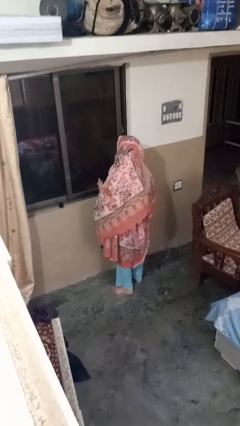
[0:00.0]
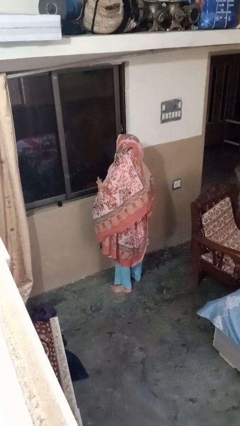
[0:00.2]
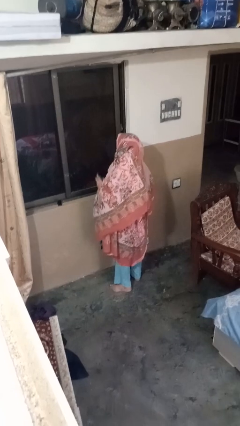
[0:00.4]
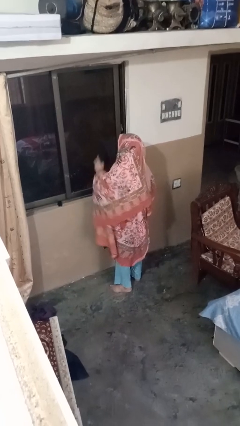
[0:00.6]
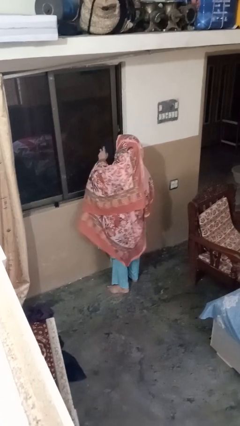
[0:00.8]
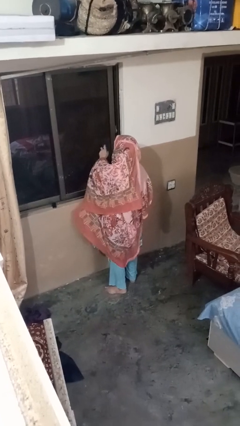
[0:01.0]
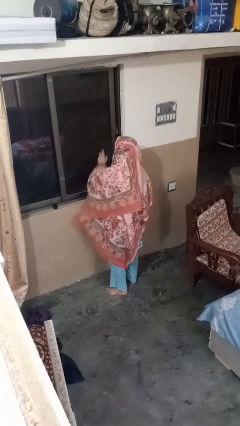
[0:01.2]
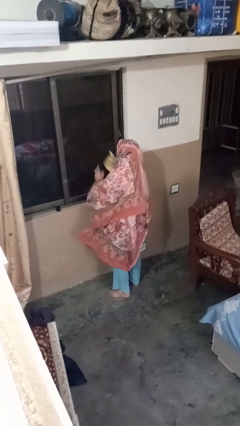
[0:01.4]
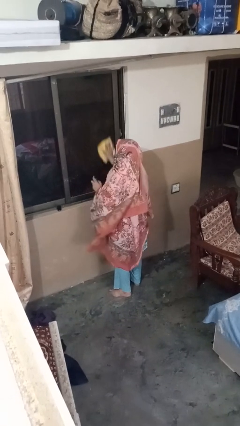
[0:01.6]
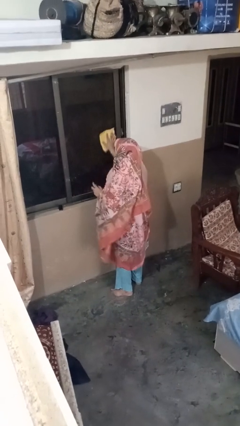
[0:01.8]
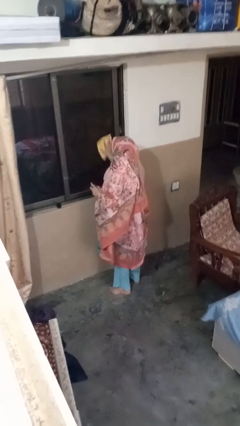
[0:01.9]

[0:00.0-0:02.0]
person sprays from bottle

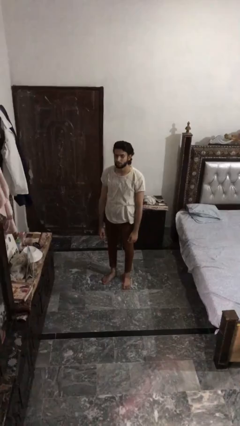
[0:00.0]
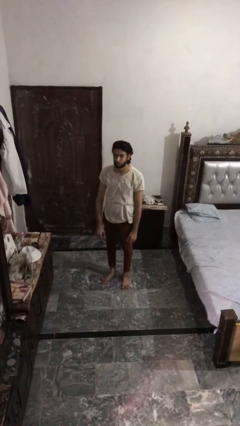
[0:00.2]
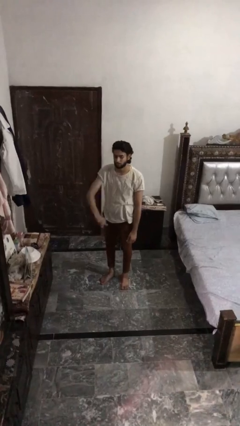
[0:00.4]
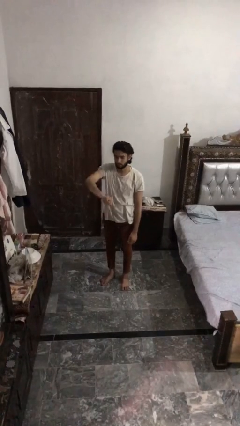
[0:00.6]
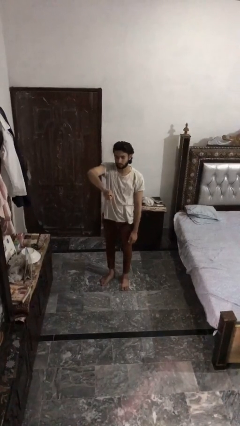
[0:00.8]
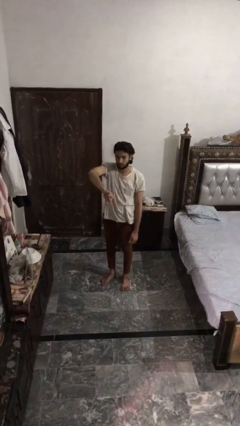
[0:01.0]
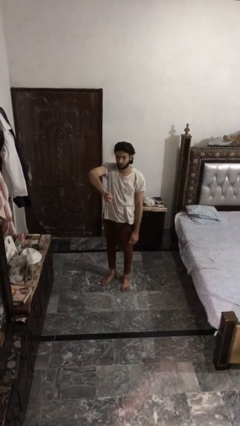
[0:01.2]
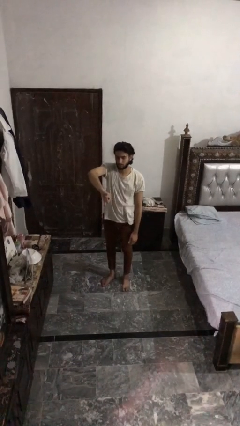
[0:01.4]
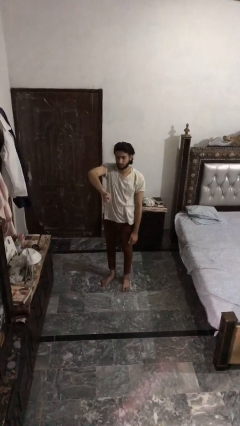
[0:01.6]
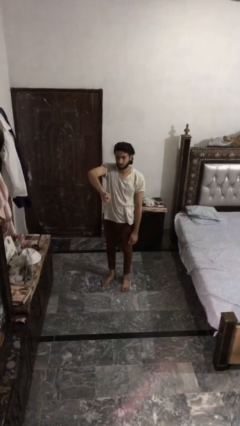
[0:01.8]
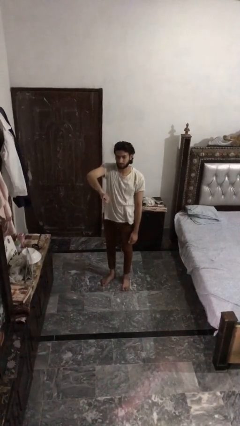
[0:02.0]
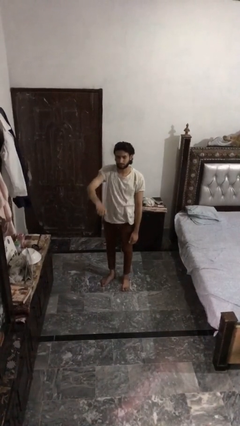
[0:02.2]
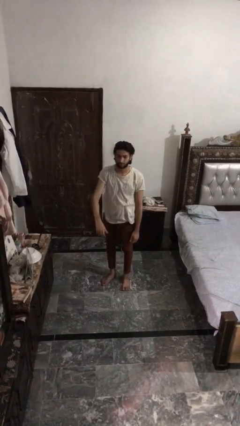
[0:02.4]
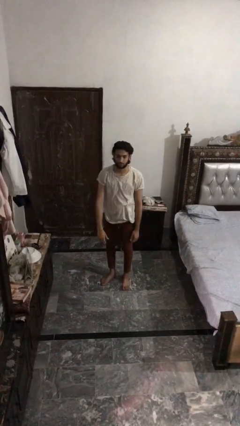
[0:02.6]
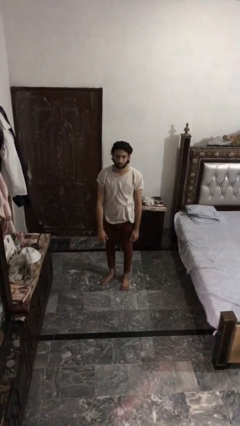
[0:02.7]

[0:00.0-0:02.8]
person gestures thumbs down

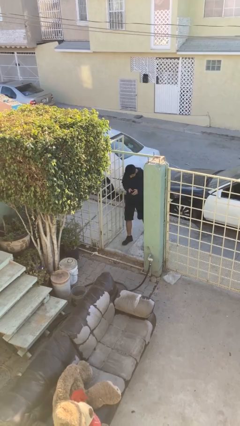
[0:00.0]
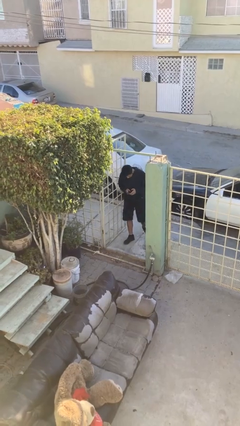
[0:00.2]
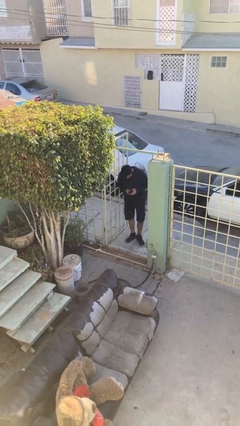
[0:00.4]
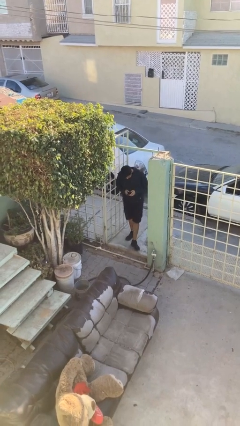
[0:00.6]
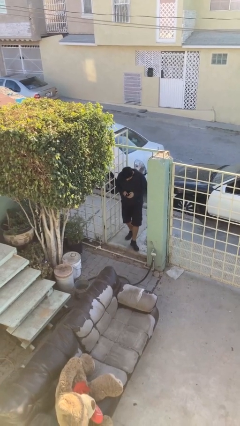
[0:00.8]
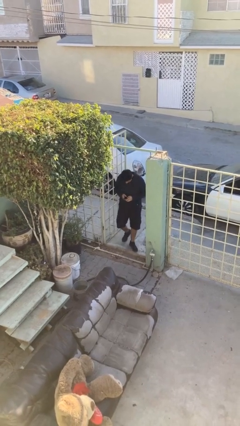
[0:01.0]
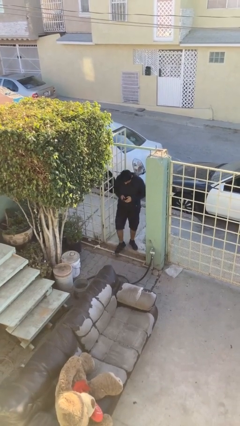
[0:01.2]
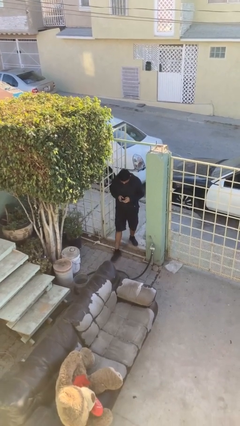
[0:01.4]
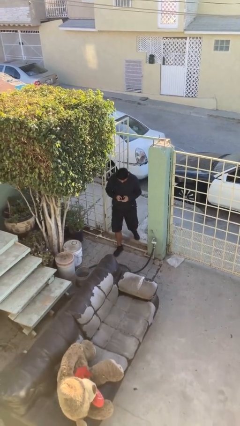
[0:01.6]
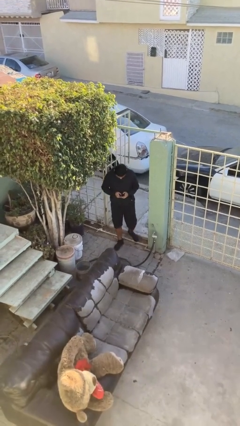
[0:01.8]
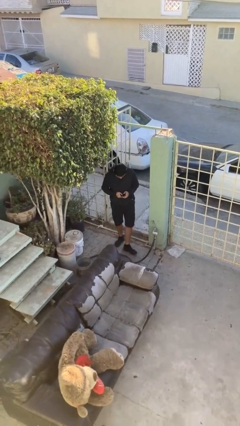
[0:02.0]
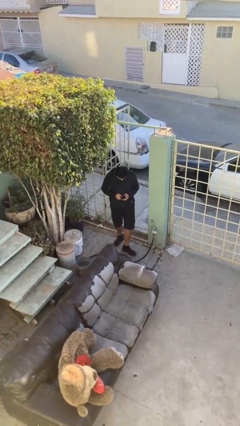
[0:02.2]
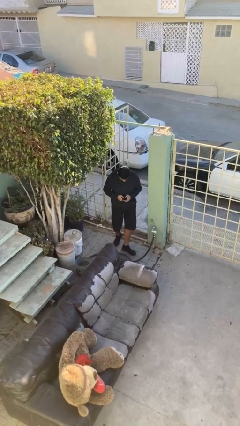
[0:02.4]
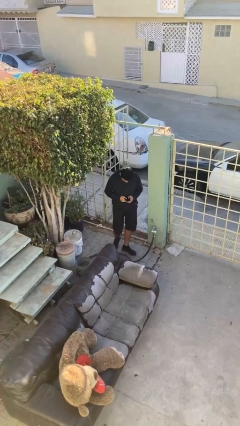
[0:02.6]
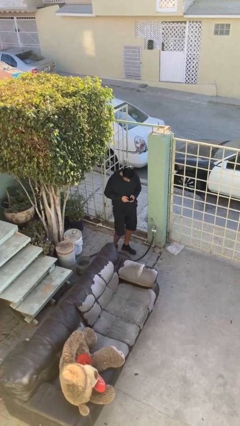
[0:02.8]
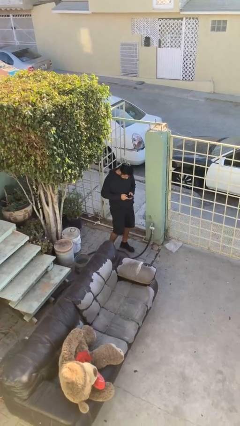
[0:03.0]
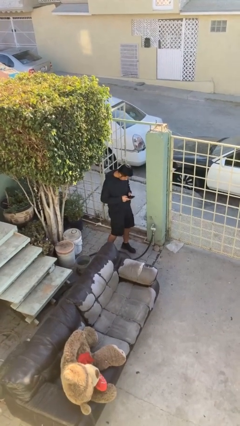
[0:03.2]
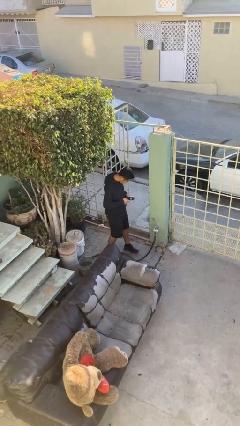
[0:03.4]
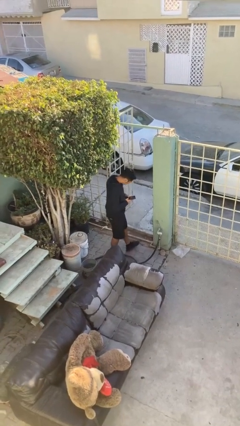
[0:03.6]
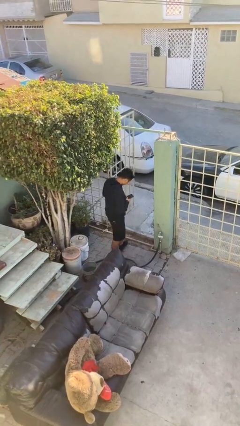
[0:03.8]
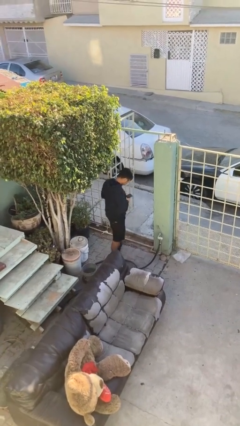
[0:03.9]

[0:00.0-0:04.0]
person enters scene through structure

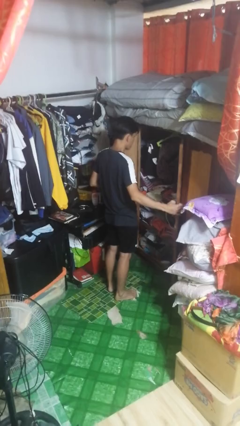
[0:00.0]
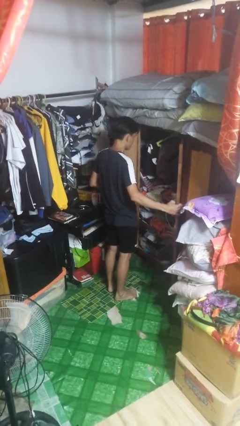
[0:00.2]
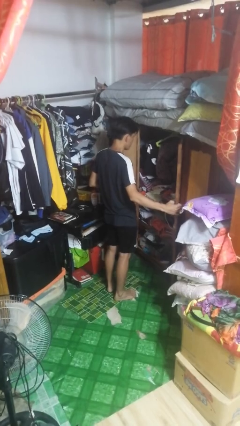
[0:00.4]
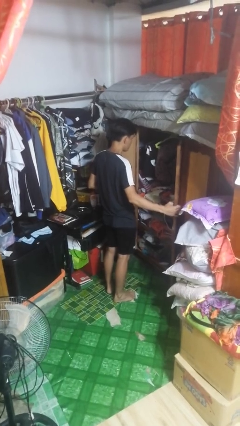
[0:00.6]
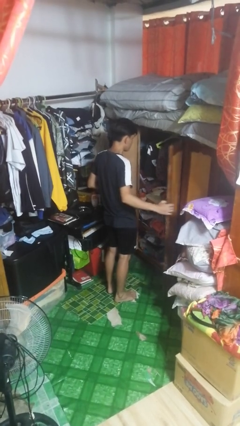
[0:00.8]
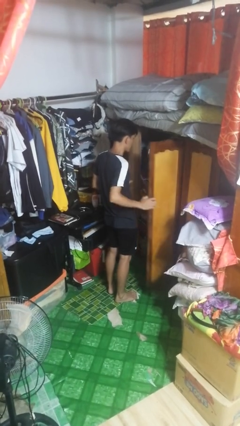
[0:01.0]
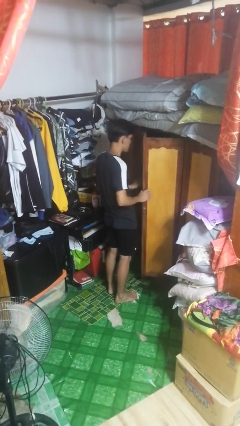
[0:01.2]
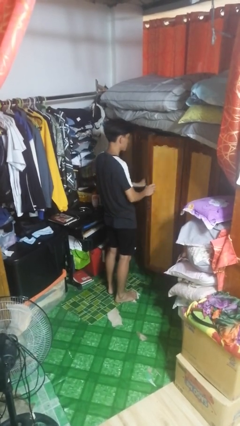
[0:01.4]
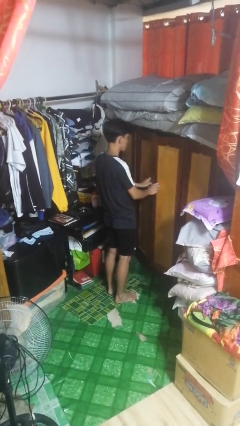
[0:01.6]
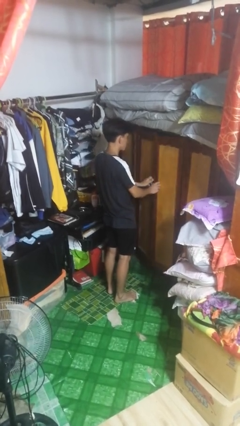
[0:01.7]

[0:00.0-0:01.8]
person closes dresser drawer

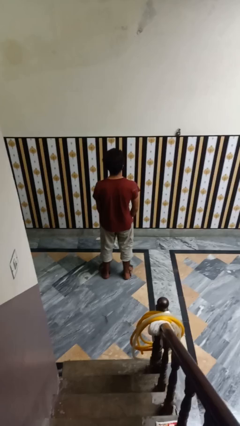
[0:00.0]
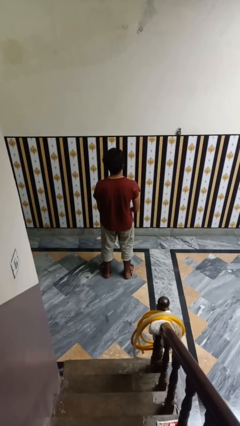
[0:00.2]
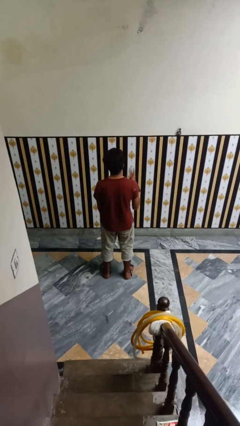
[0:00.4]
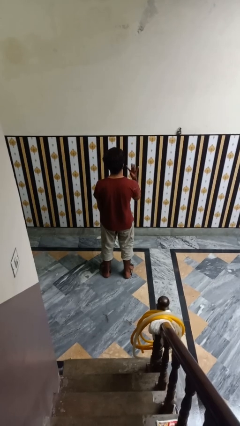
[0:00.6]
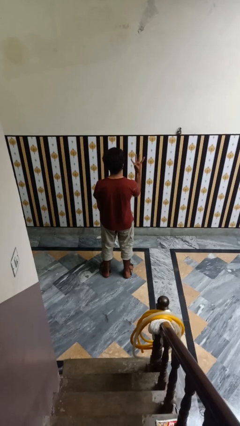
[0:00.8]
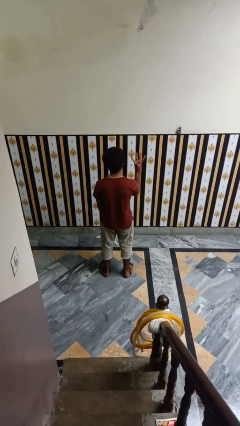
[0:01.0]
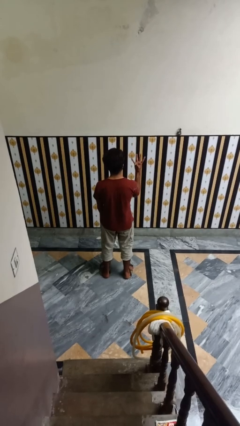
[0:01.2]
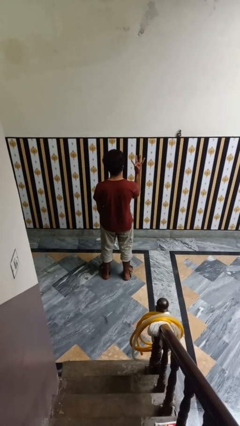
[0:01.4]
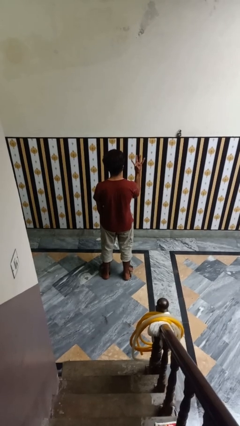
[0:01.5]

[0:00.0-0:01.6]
person gestures number four

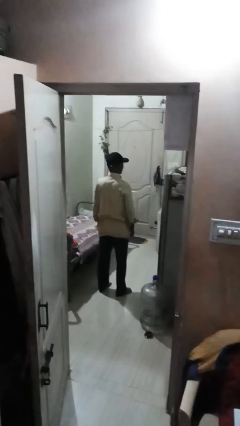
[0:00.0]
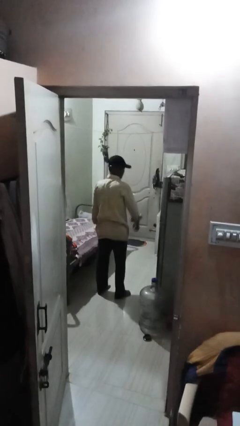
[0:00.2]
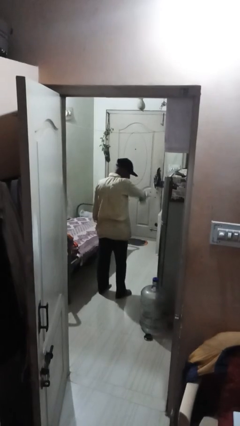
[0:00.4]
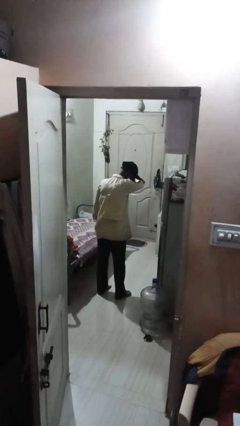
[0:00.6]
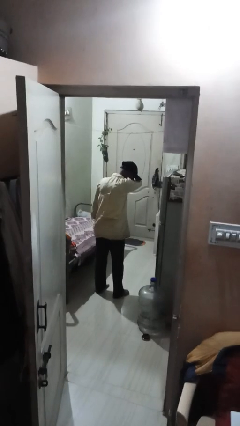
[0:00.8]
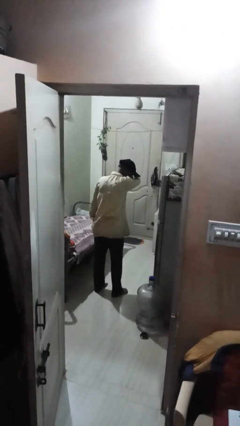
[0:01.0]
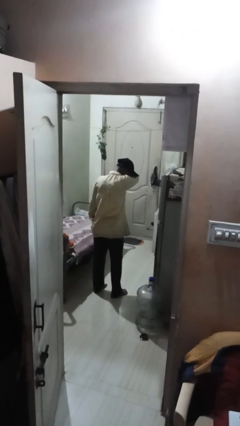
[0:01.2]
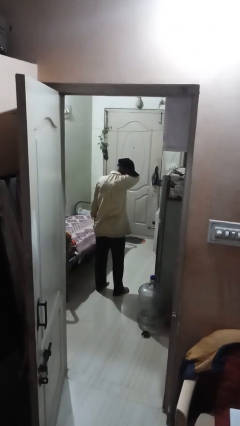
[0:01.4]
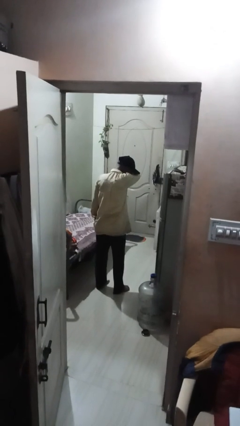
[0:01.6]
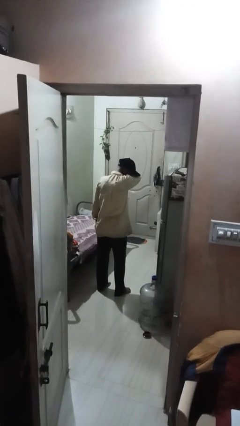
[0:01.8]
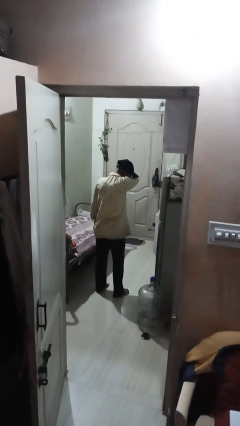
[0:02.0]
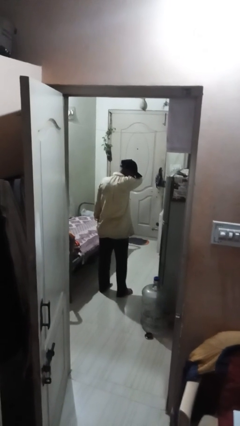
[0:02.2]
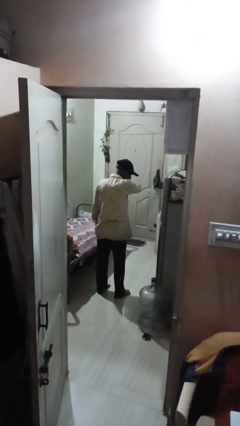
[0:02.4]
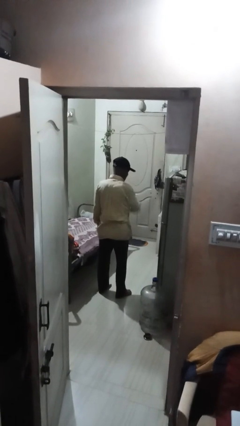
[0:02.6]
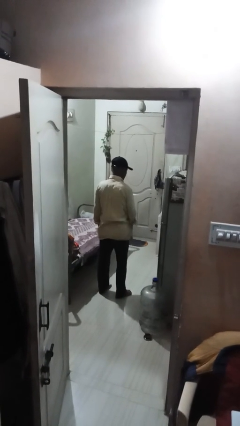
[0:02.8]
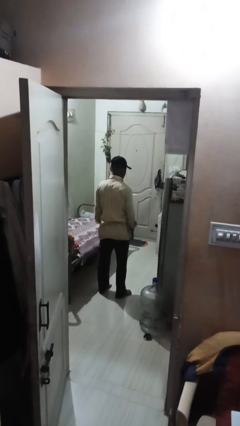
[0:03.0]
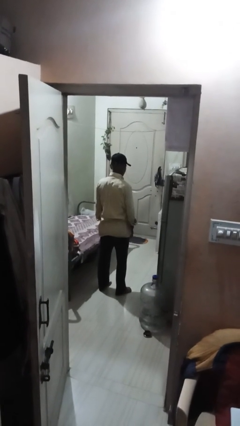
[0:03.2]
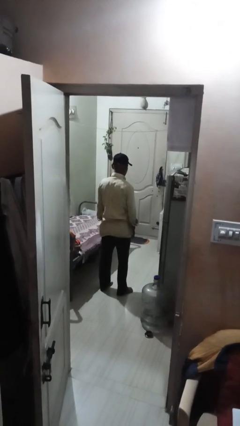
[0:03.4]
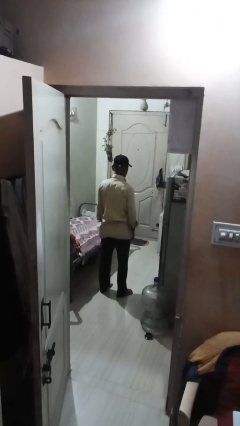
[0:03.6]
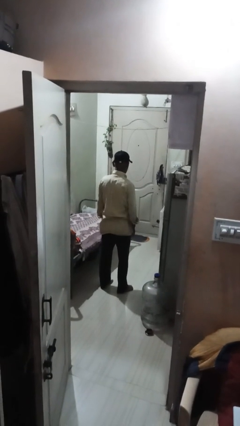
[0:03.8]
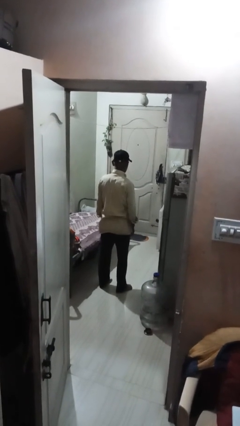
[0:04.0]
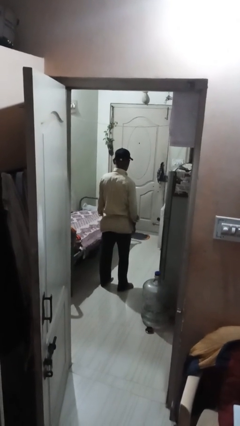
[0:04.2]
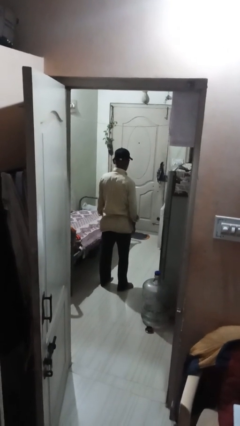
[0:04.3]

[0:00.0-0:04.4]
person shrugs

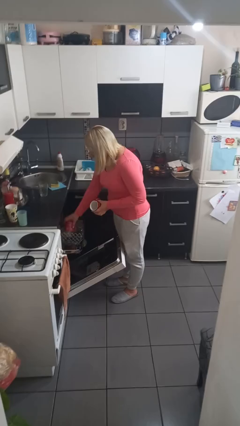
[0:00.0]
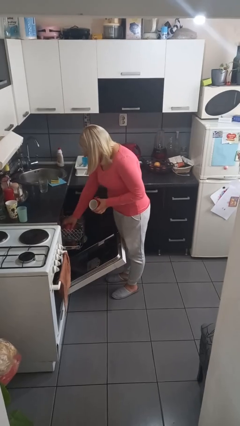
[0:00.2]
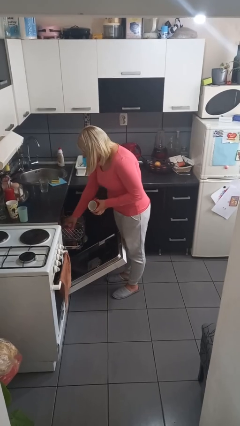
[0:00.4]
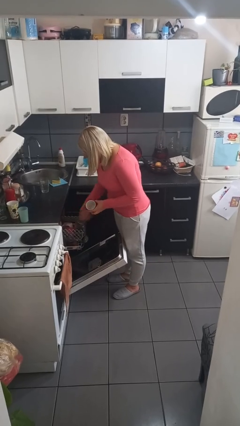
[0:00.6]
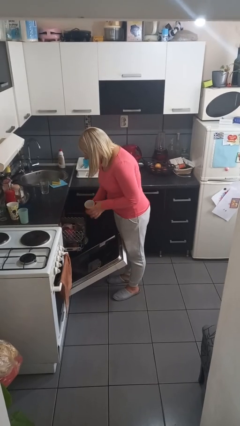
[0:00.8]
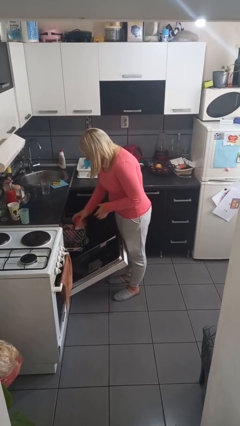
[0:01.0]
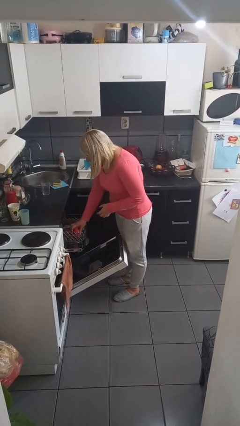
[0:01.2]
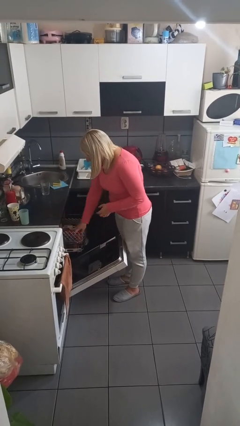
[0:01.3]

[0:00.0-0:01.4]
person loads dishwasher
